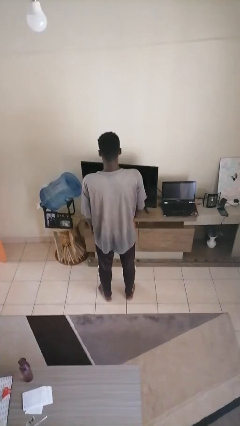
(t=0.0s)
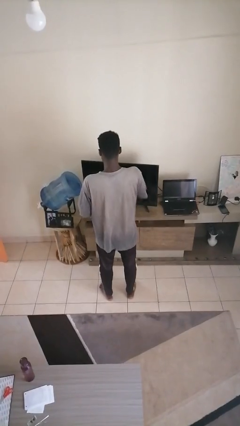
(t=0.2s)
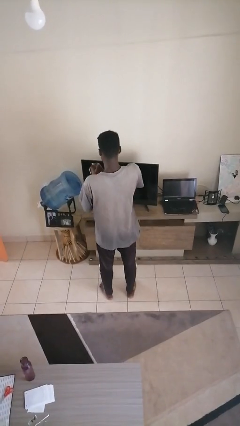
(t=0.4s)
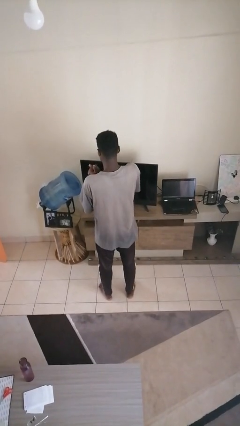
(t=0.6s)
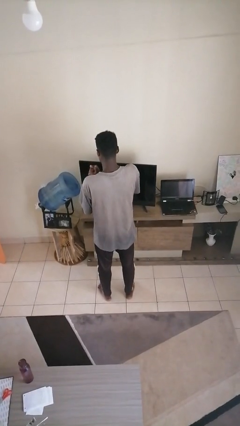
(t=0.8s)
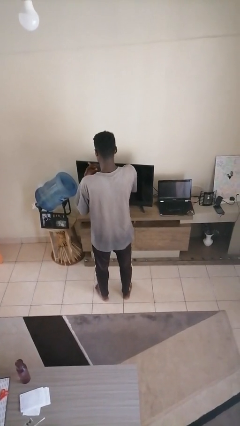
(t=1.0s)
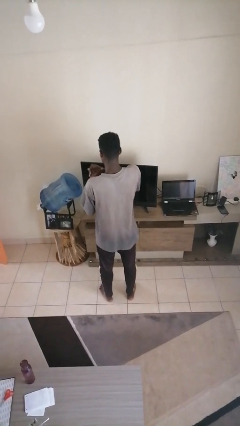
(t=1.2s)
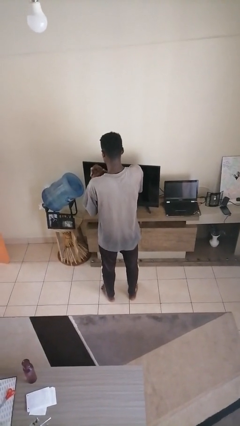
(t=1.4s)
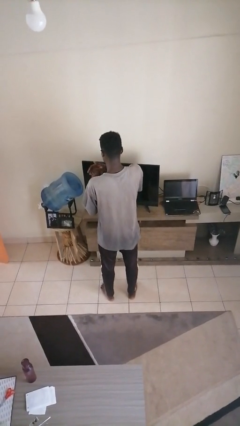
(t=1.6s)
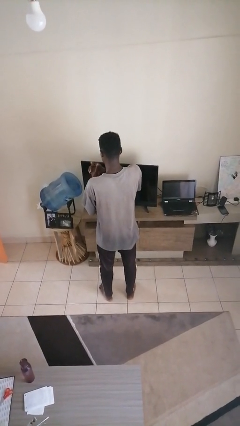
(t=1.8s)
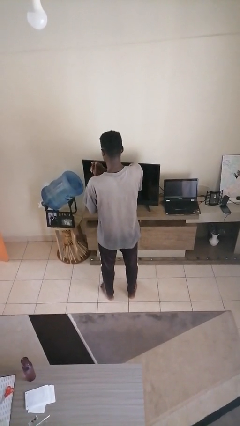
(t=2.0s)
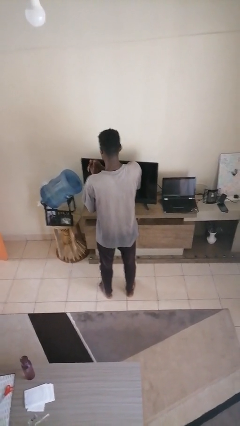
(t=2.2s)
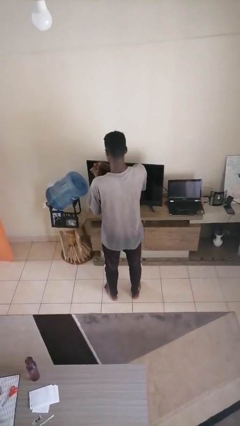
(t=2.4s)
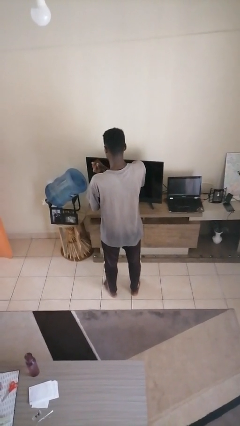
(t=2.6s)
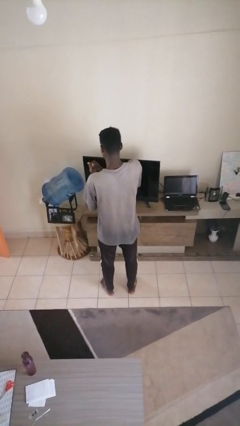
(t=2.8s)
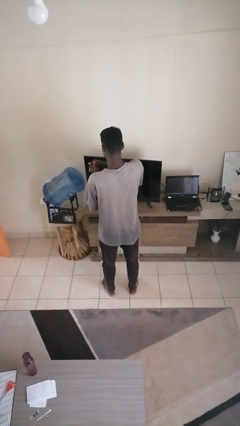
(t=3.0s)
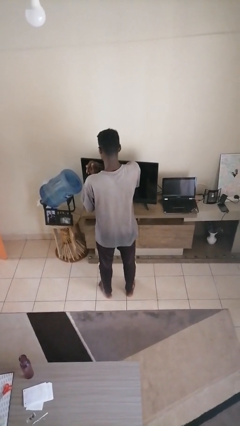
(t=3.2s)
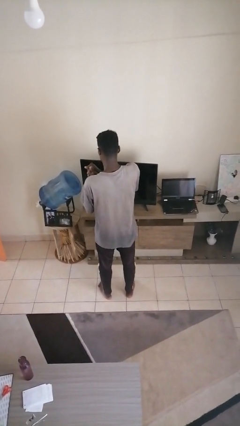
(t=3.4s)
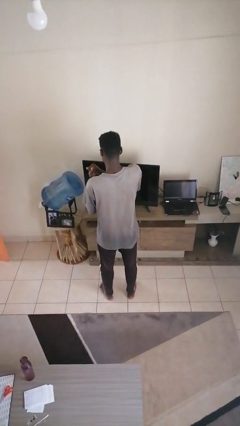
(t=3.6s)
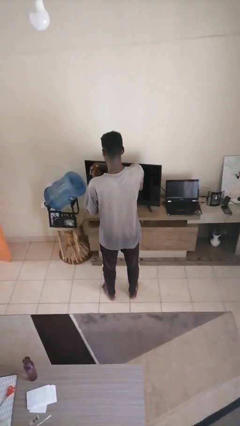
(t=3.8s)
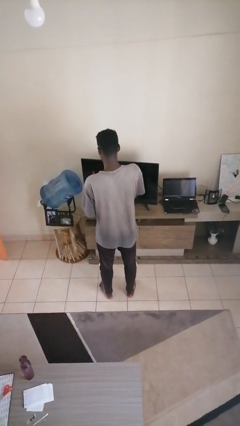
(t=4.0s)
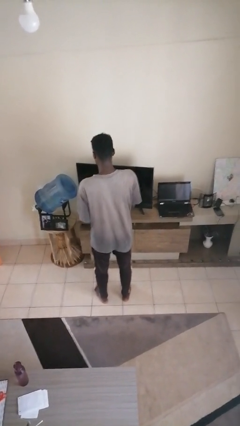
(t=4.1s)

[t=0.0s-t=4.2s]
person cracks knuckles

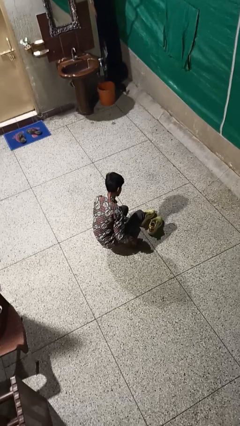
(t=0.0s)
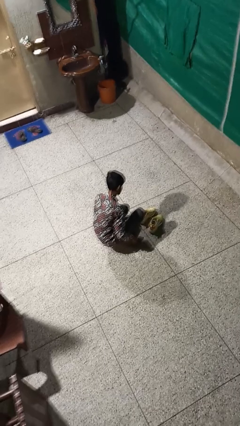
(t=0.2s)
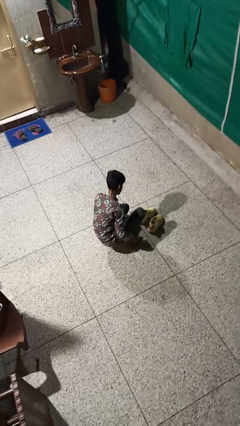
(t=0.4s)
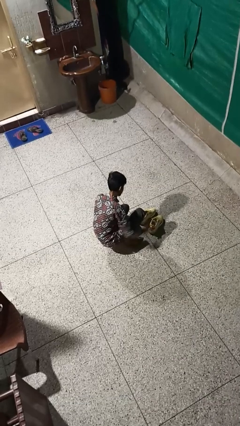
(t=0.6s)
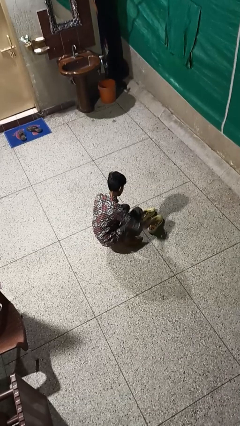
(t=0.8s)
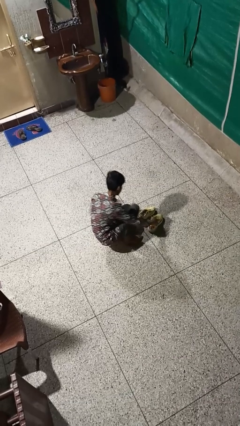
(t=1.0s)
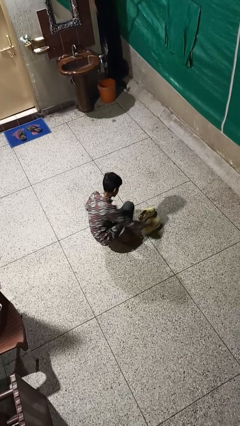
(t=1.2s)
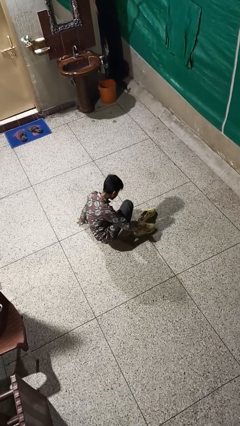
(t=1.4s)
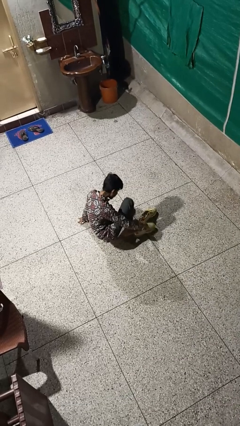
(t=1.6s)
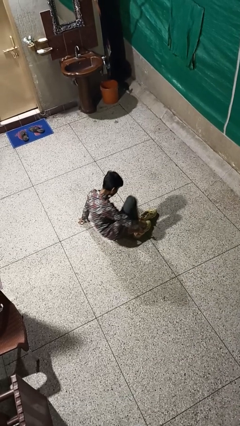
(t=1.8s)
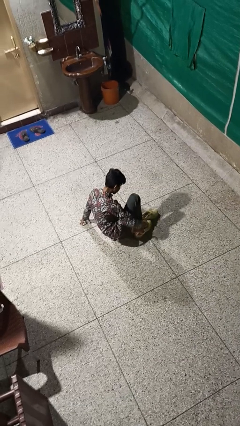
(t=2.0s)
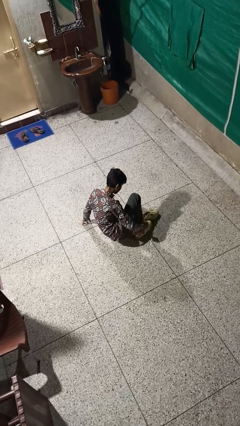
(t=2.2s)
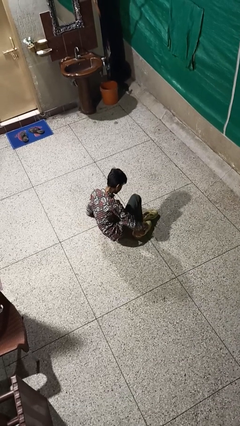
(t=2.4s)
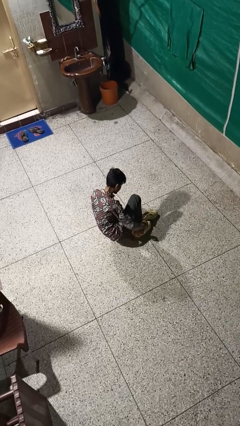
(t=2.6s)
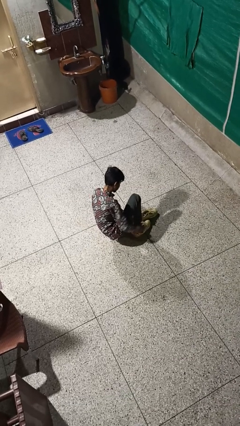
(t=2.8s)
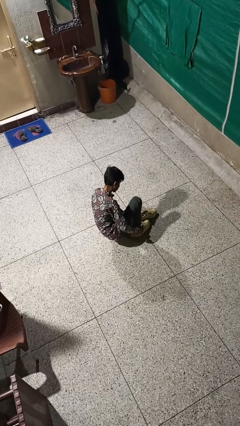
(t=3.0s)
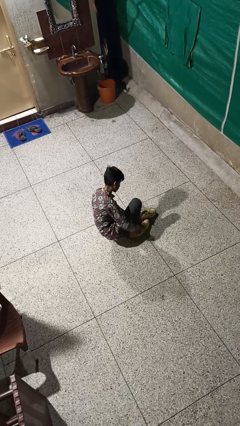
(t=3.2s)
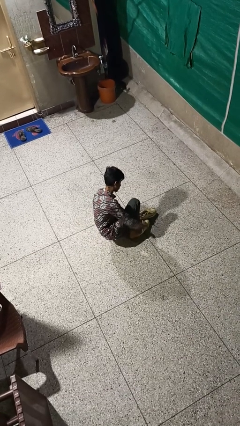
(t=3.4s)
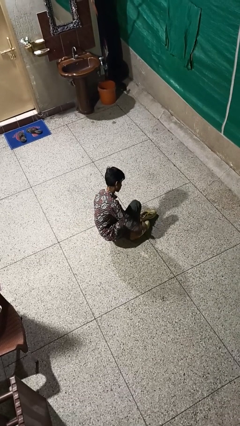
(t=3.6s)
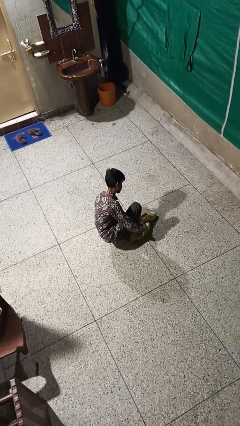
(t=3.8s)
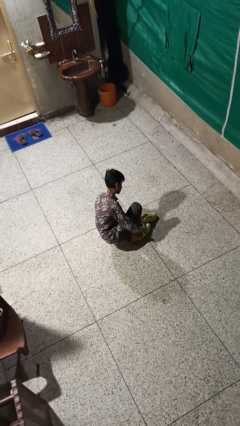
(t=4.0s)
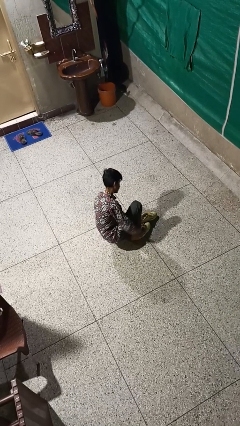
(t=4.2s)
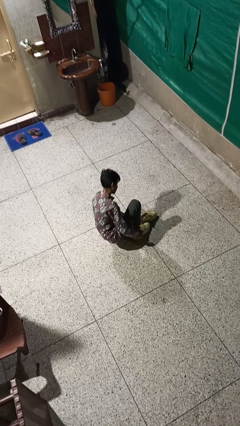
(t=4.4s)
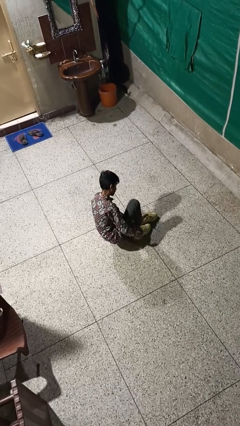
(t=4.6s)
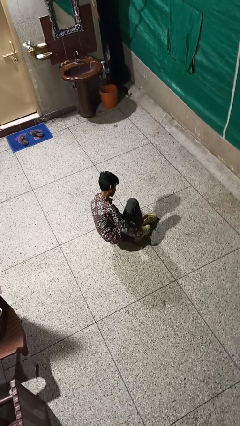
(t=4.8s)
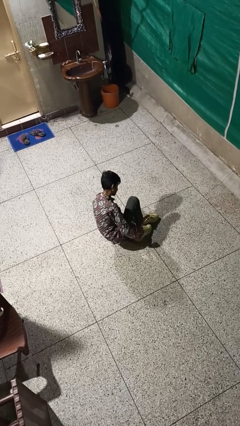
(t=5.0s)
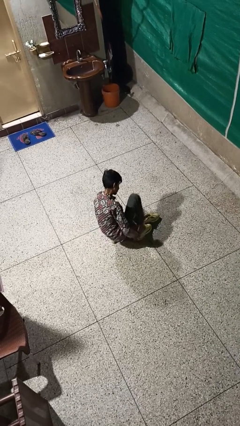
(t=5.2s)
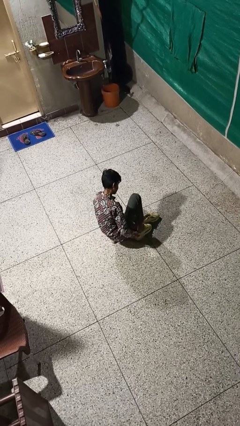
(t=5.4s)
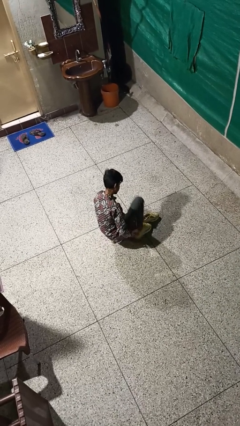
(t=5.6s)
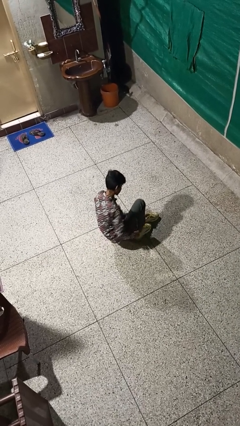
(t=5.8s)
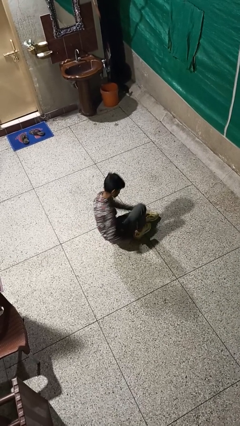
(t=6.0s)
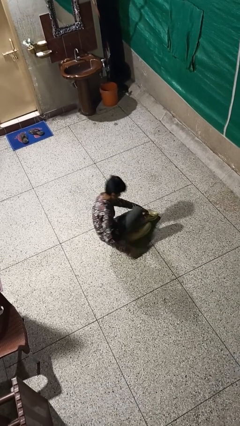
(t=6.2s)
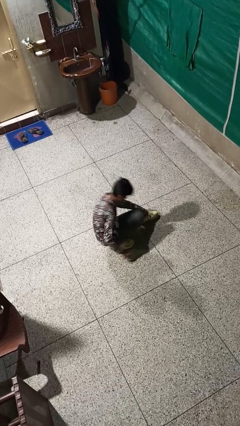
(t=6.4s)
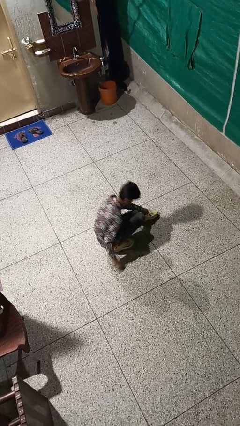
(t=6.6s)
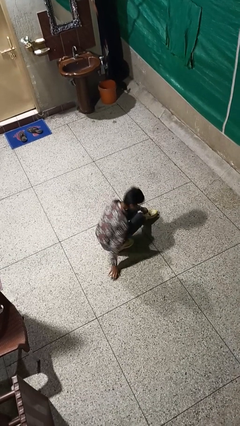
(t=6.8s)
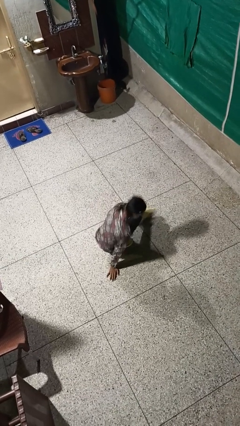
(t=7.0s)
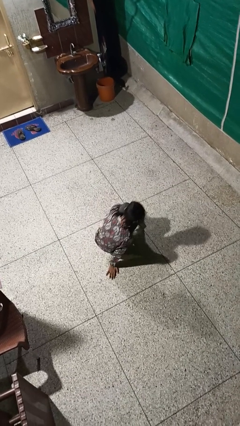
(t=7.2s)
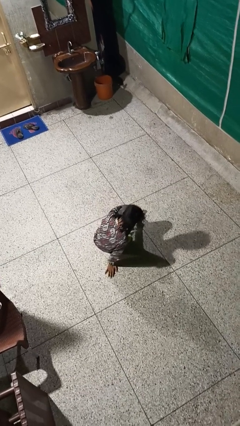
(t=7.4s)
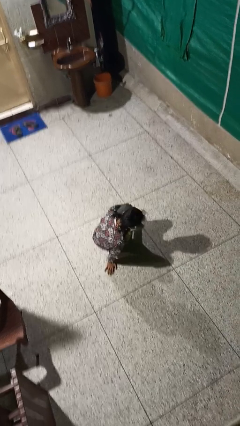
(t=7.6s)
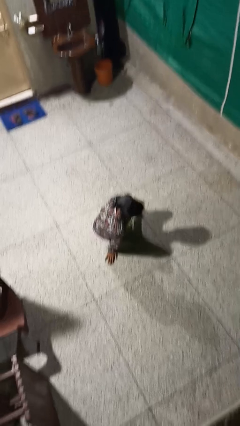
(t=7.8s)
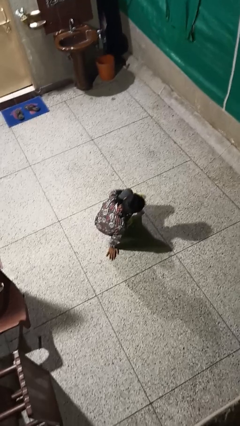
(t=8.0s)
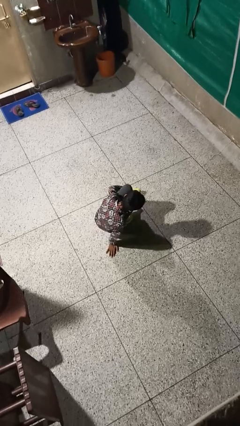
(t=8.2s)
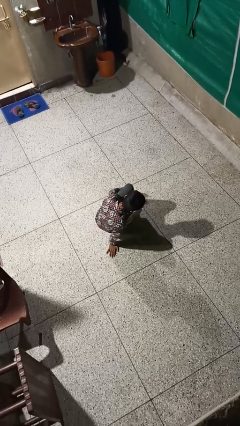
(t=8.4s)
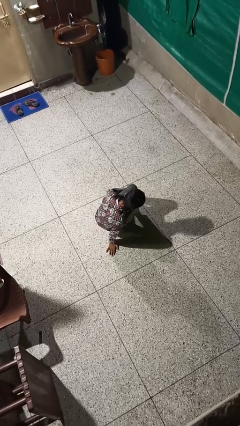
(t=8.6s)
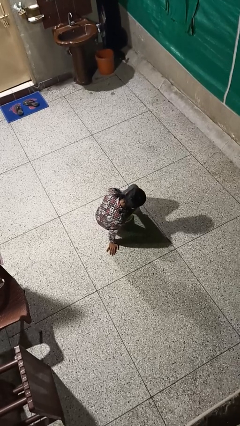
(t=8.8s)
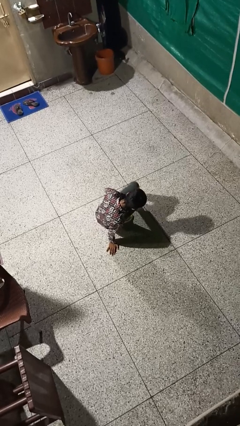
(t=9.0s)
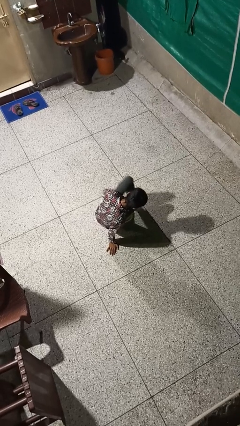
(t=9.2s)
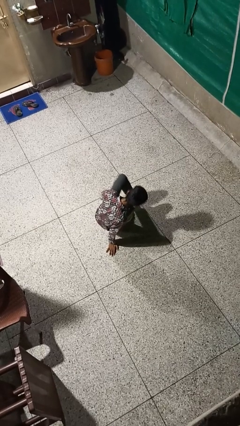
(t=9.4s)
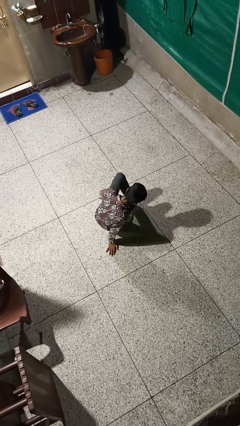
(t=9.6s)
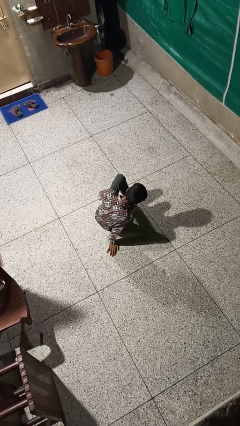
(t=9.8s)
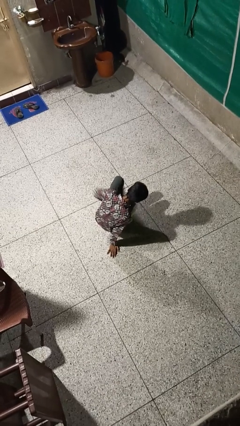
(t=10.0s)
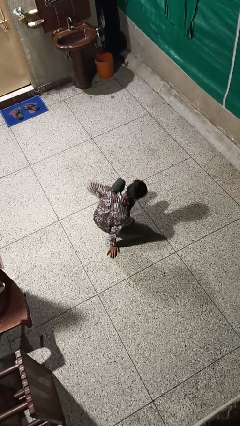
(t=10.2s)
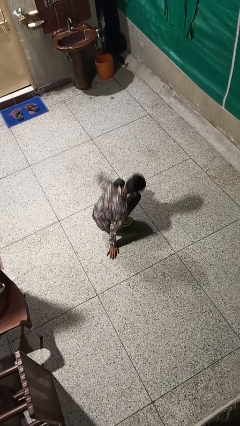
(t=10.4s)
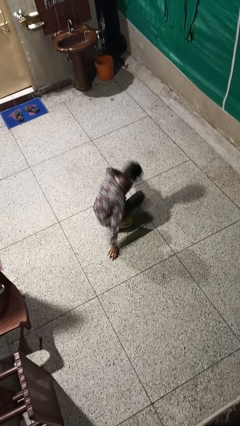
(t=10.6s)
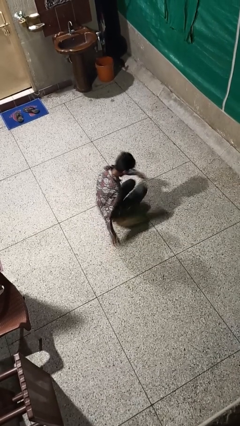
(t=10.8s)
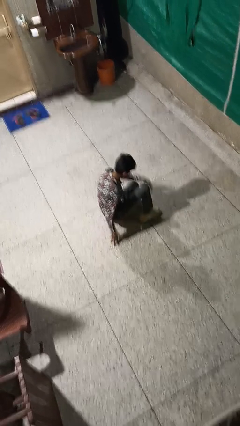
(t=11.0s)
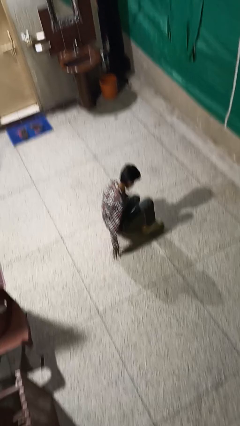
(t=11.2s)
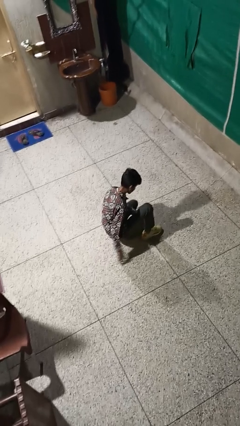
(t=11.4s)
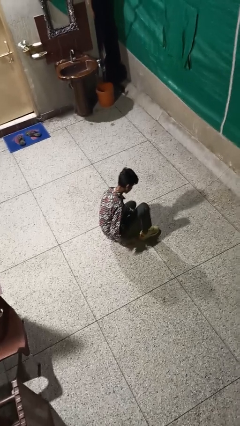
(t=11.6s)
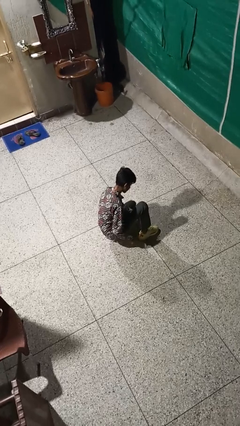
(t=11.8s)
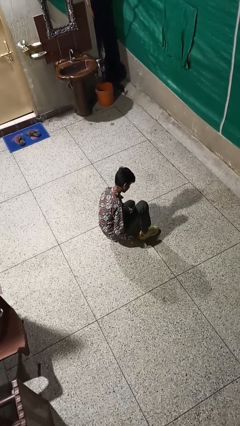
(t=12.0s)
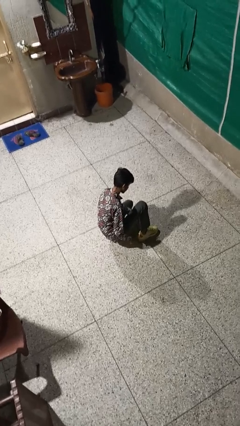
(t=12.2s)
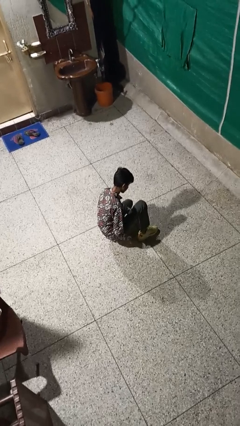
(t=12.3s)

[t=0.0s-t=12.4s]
person puts on shoes

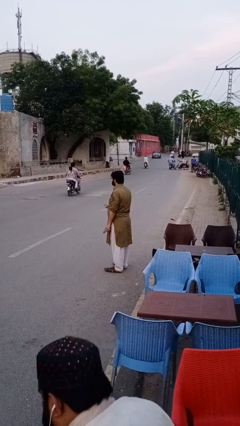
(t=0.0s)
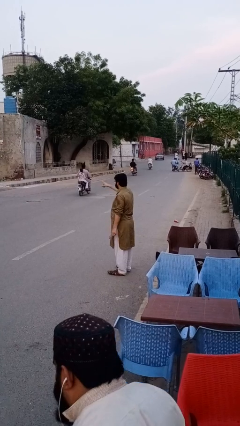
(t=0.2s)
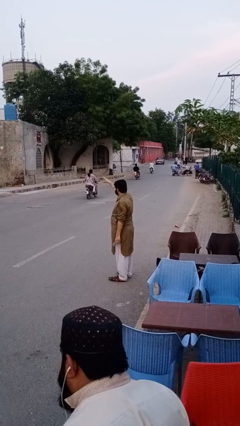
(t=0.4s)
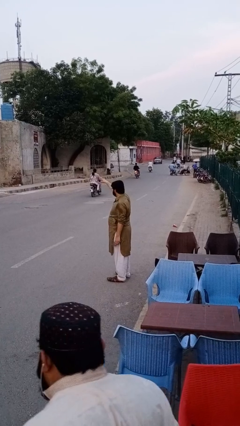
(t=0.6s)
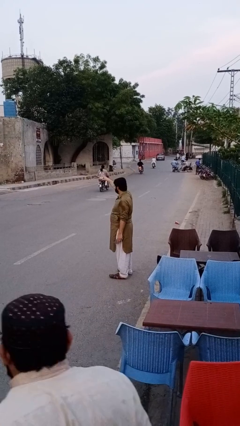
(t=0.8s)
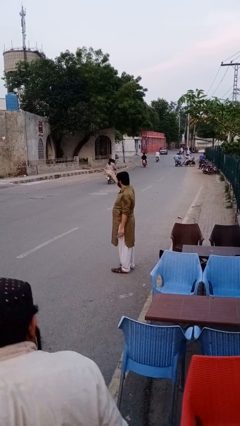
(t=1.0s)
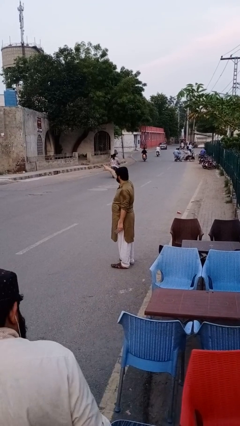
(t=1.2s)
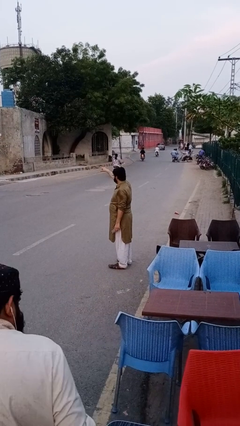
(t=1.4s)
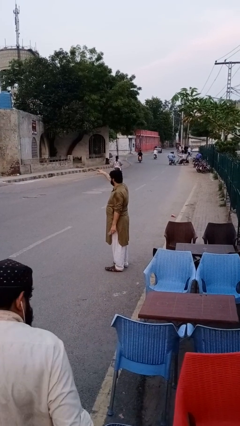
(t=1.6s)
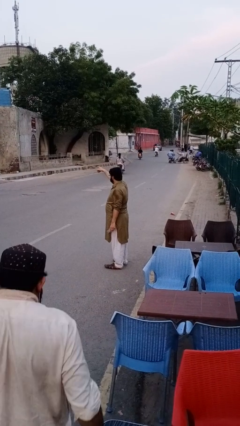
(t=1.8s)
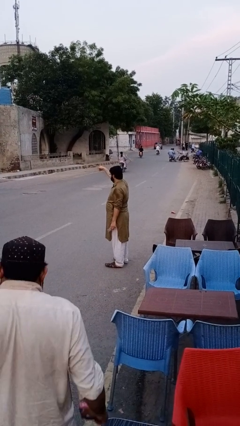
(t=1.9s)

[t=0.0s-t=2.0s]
person takes phone from pocket
